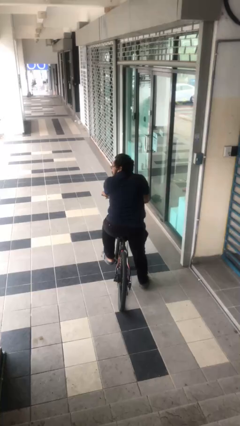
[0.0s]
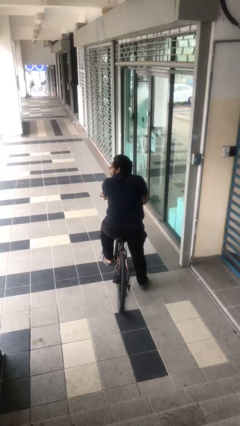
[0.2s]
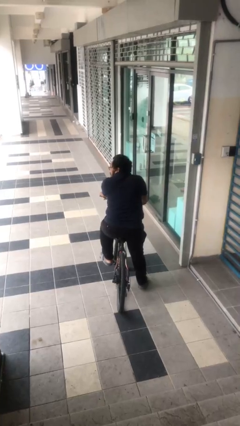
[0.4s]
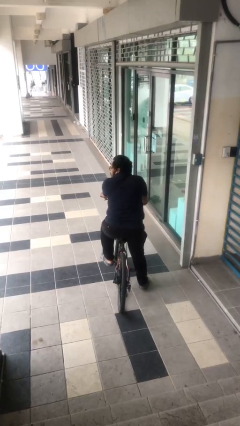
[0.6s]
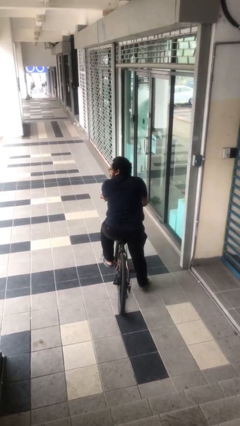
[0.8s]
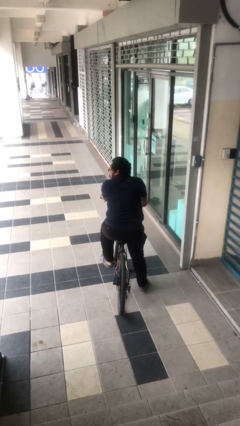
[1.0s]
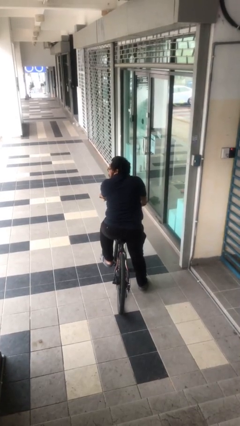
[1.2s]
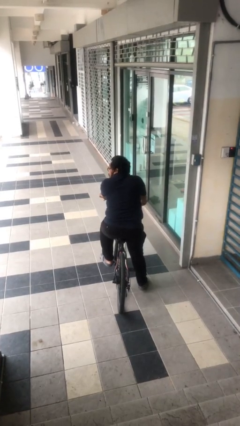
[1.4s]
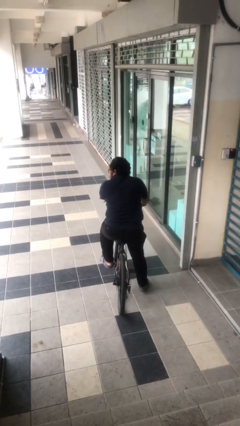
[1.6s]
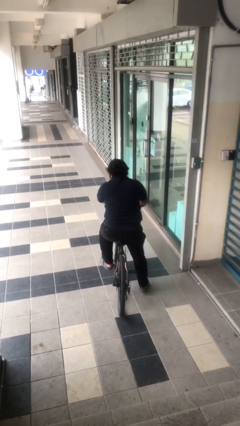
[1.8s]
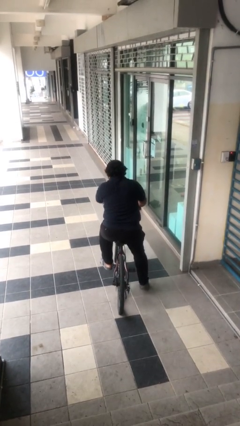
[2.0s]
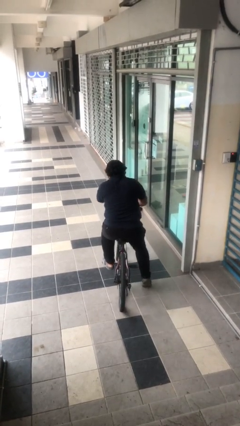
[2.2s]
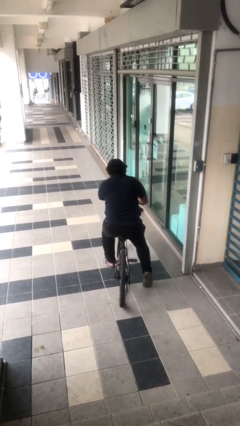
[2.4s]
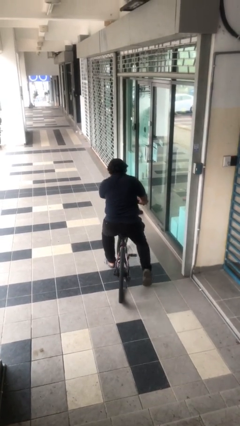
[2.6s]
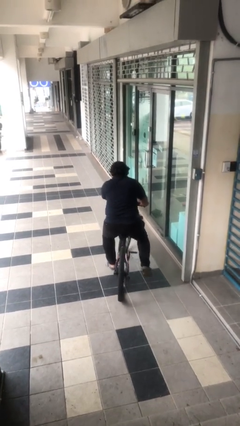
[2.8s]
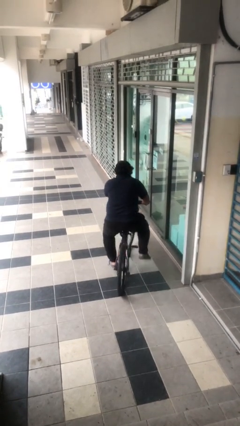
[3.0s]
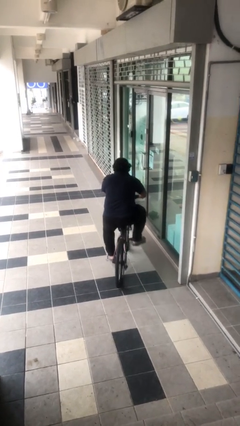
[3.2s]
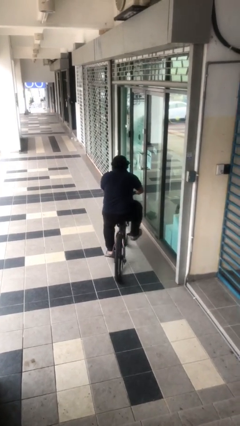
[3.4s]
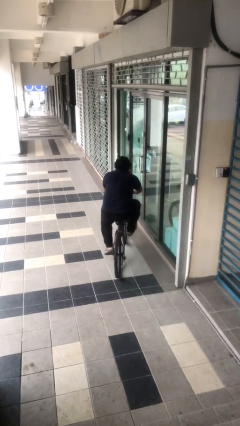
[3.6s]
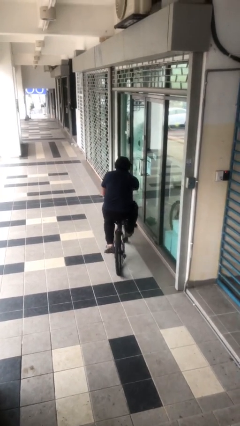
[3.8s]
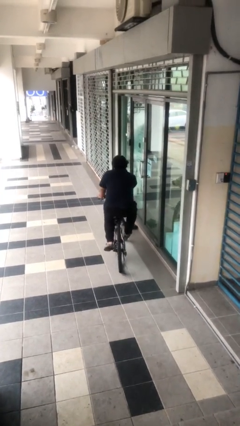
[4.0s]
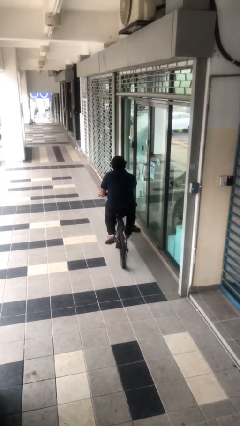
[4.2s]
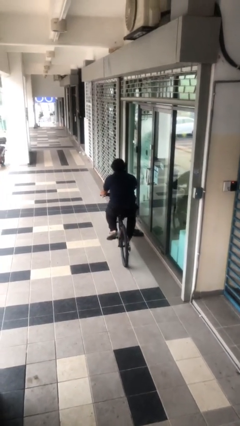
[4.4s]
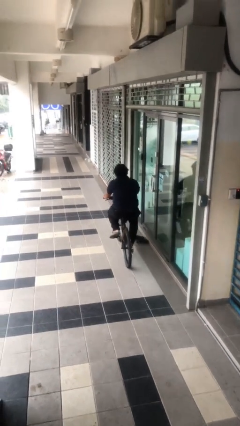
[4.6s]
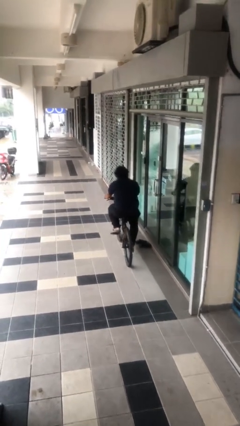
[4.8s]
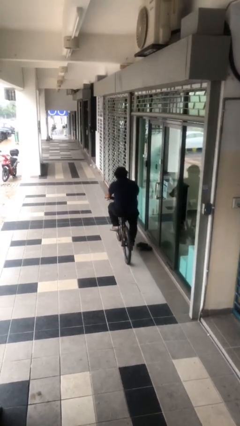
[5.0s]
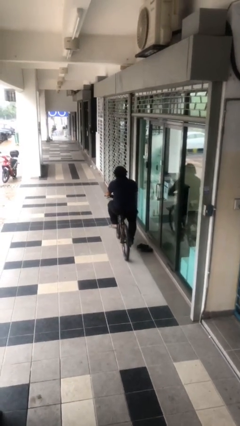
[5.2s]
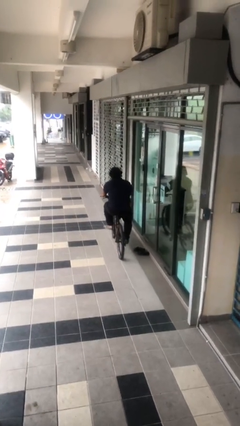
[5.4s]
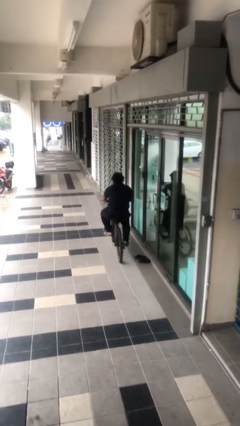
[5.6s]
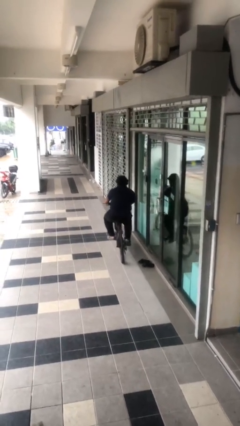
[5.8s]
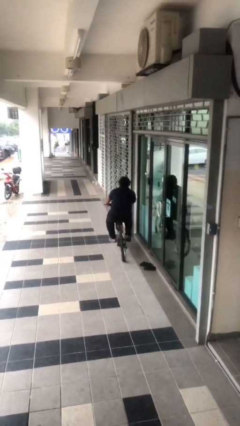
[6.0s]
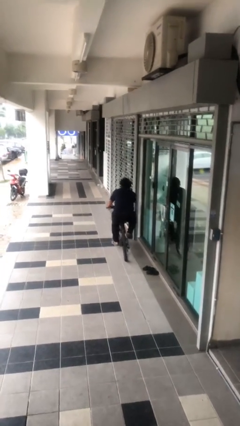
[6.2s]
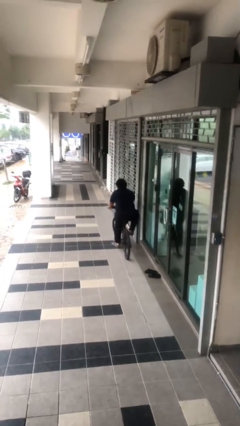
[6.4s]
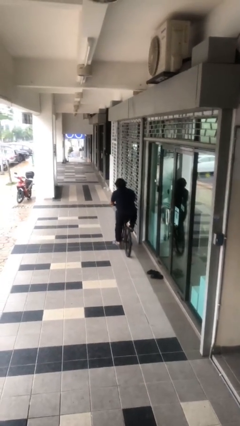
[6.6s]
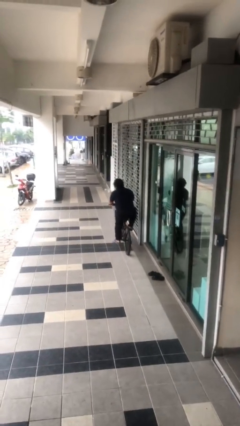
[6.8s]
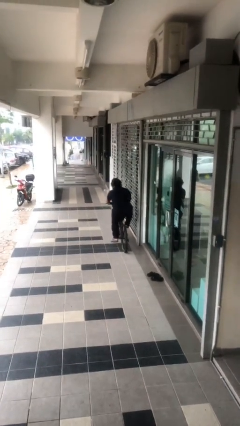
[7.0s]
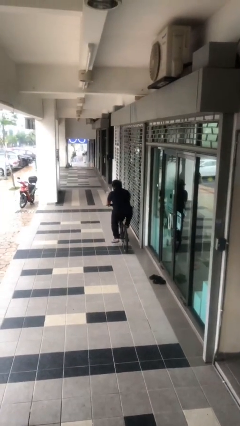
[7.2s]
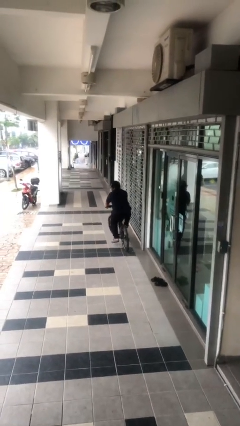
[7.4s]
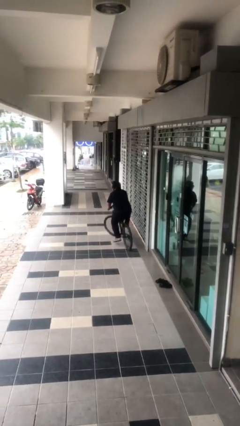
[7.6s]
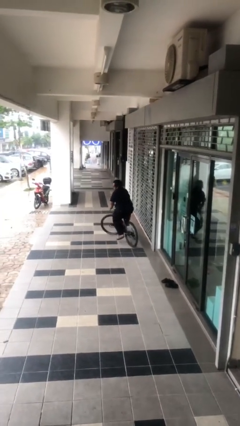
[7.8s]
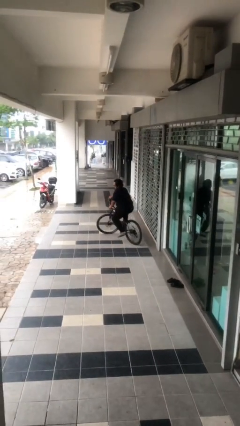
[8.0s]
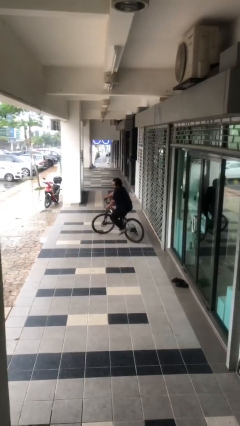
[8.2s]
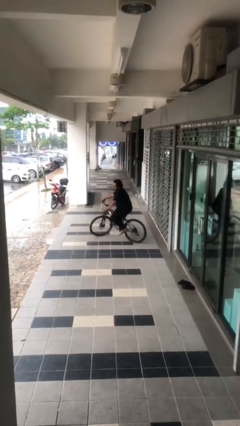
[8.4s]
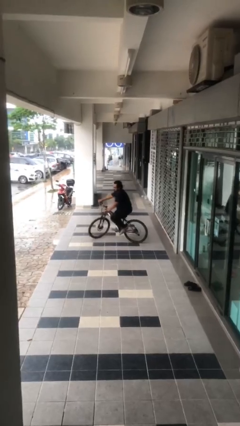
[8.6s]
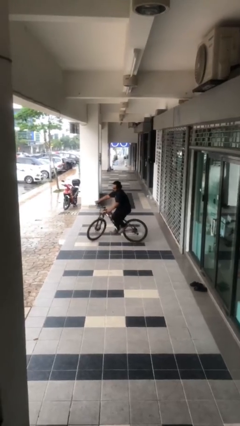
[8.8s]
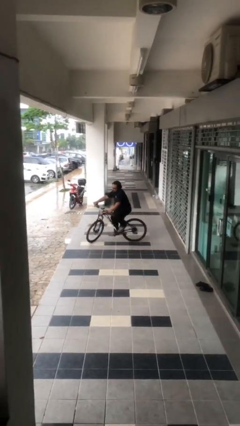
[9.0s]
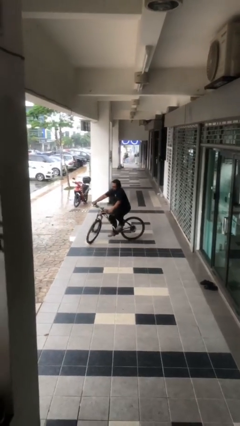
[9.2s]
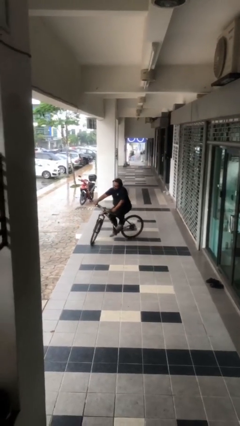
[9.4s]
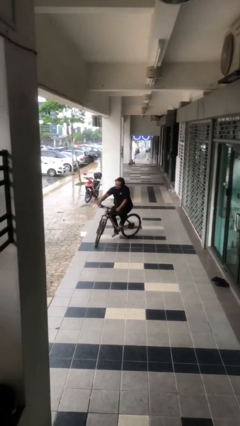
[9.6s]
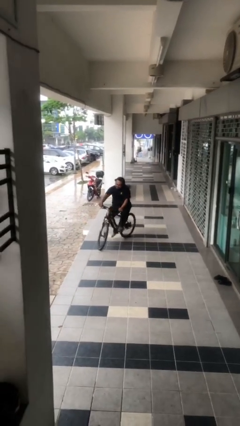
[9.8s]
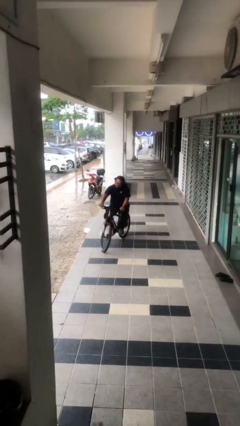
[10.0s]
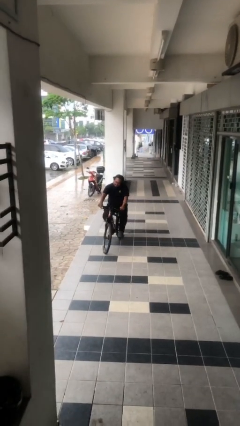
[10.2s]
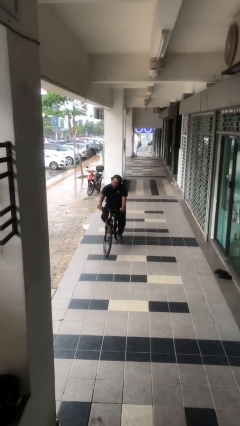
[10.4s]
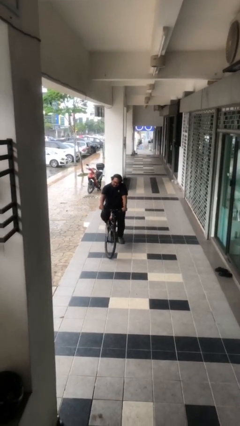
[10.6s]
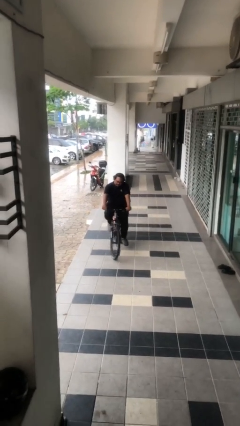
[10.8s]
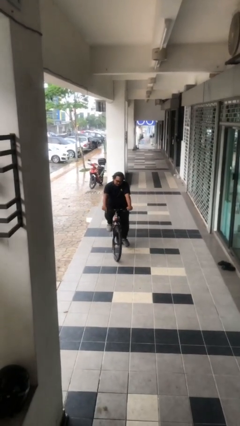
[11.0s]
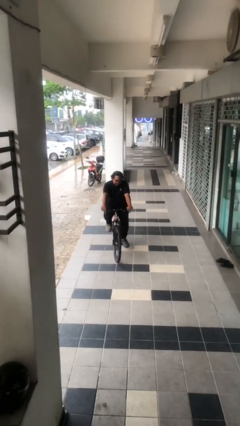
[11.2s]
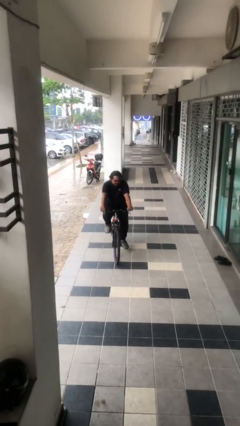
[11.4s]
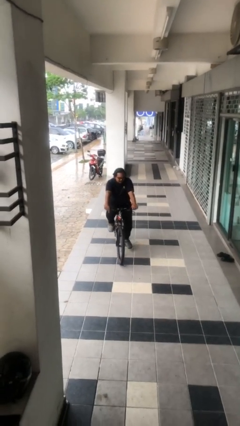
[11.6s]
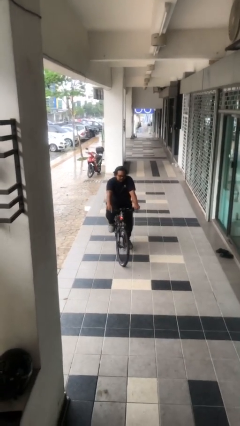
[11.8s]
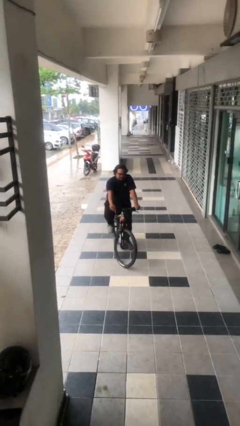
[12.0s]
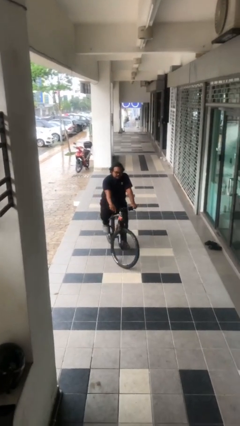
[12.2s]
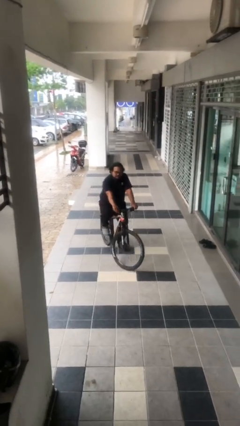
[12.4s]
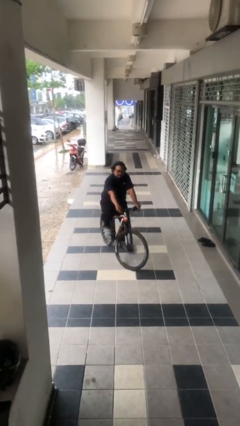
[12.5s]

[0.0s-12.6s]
person rides bicycle

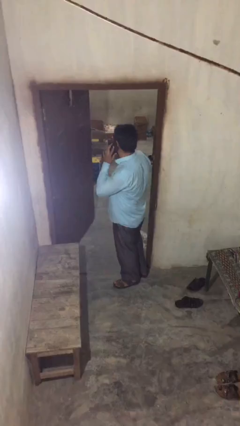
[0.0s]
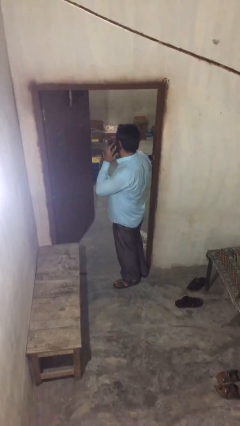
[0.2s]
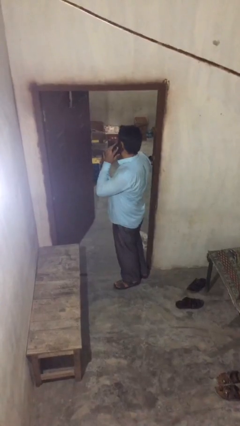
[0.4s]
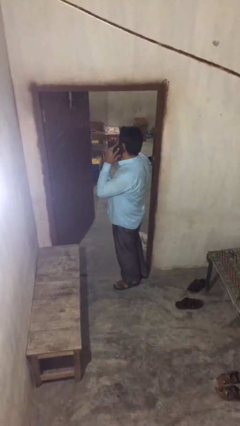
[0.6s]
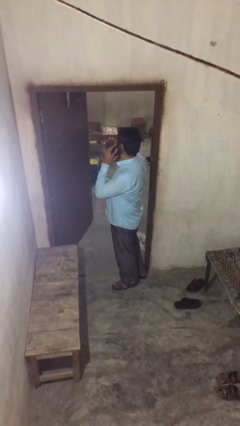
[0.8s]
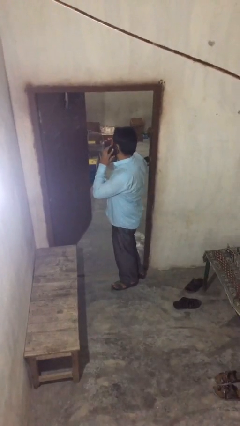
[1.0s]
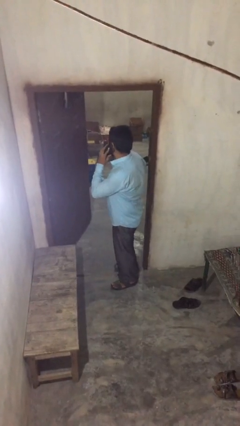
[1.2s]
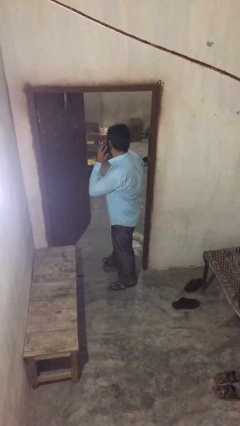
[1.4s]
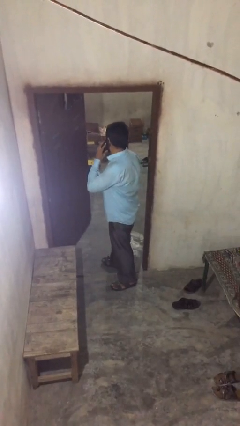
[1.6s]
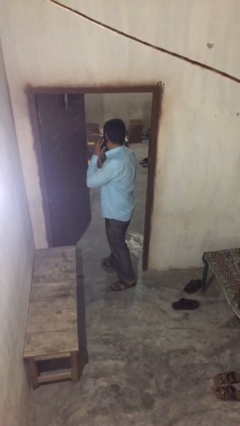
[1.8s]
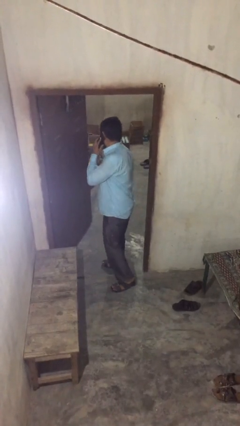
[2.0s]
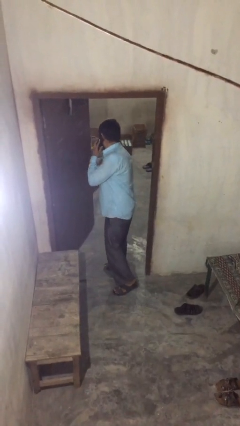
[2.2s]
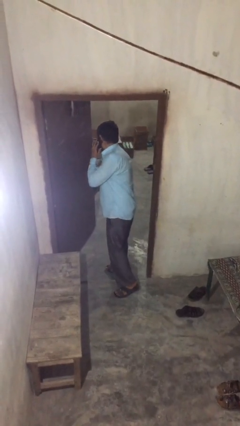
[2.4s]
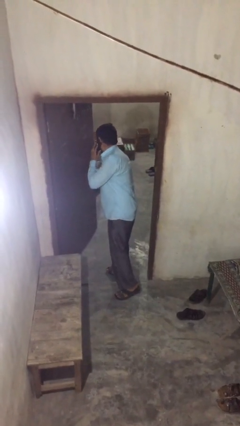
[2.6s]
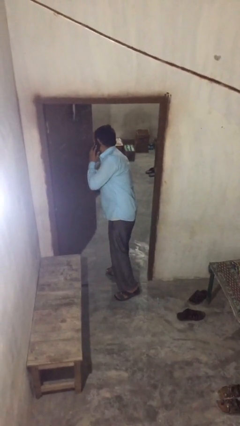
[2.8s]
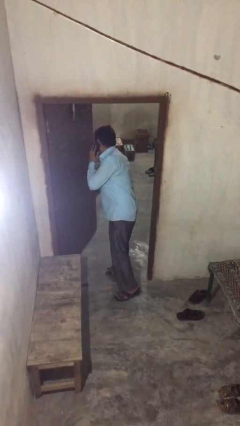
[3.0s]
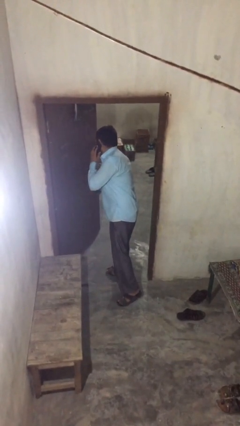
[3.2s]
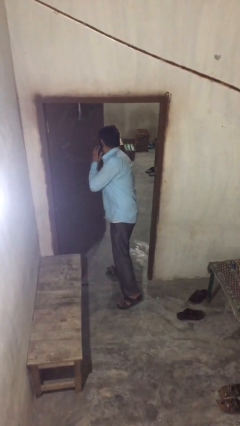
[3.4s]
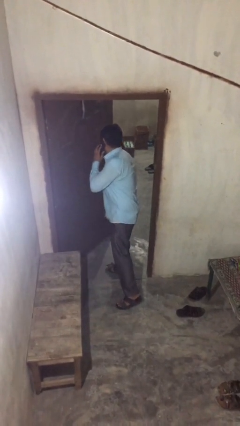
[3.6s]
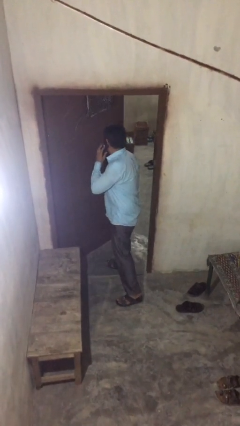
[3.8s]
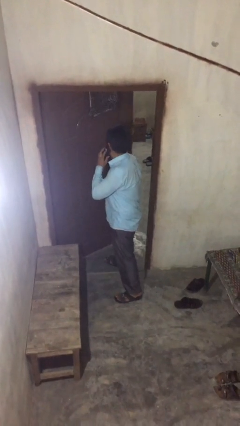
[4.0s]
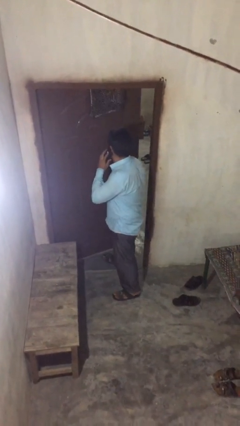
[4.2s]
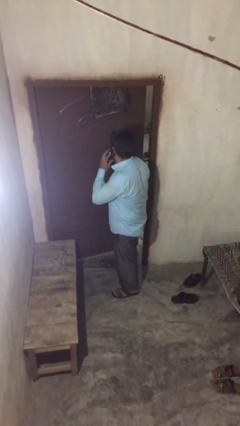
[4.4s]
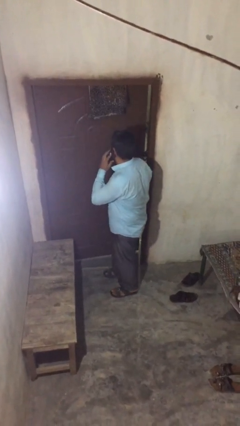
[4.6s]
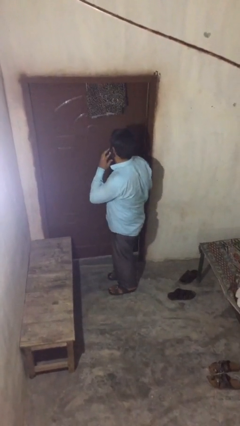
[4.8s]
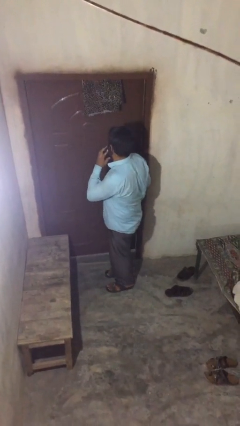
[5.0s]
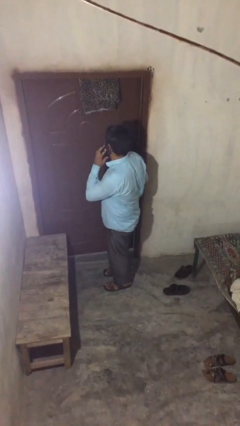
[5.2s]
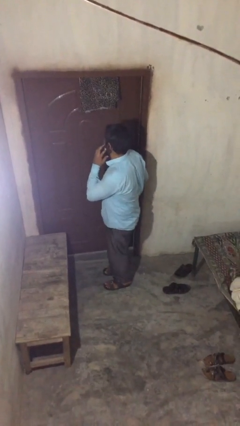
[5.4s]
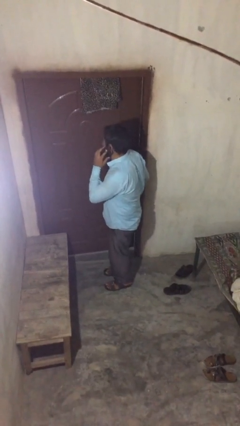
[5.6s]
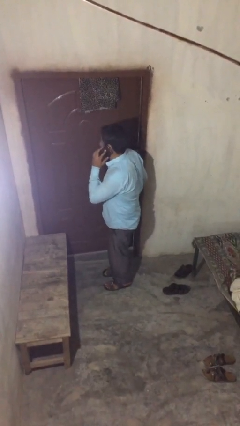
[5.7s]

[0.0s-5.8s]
person closes facility door
